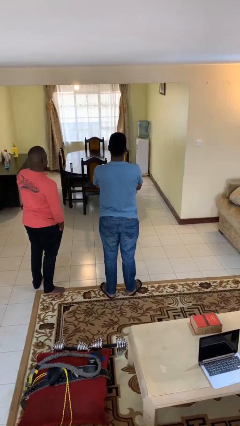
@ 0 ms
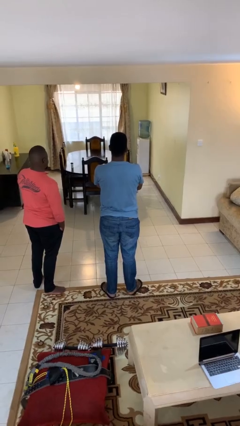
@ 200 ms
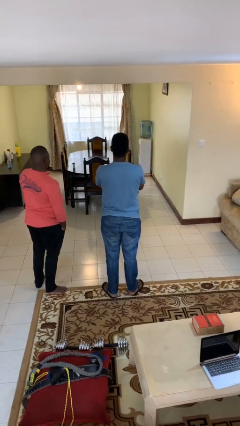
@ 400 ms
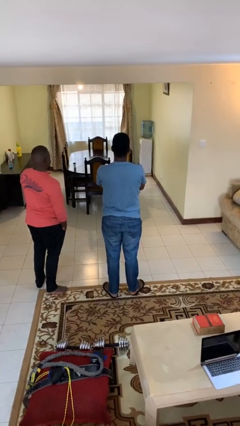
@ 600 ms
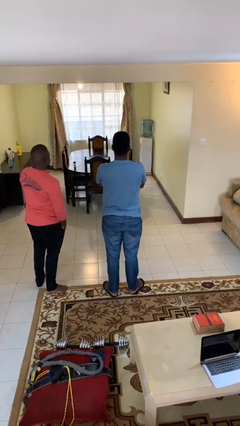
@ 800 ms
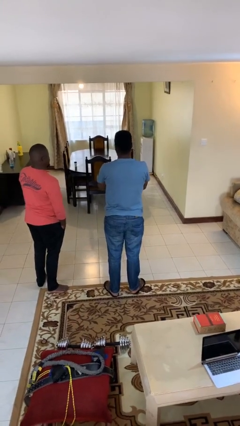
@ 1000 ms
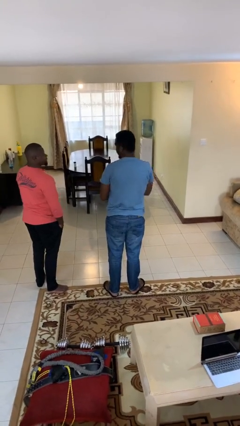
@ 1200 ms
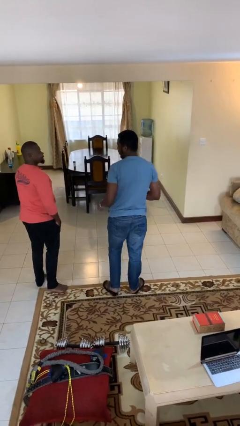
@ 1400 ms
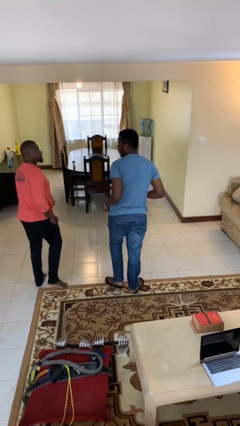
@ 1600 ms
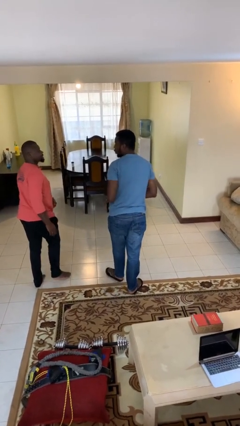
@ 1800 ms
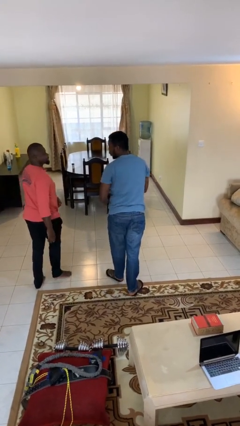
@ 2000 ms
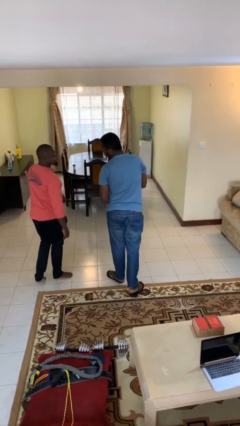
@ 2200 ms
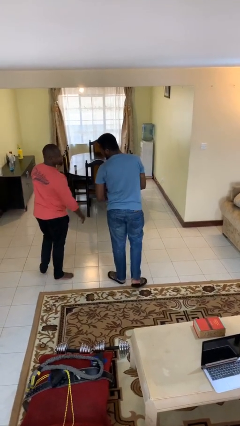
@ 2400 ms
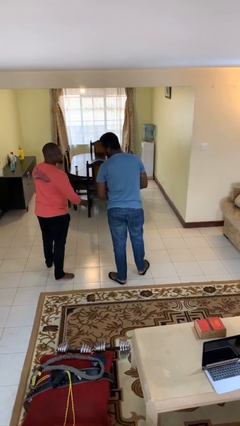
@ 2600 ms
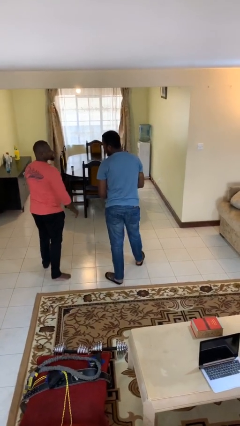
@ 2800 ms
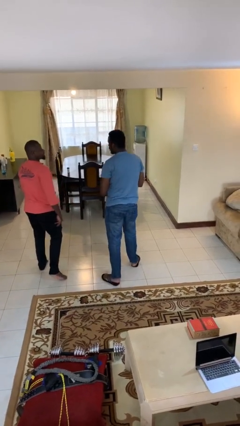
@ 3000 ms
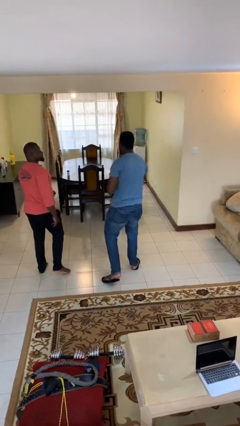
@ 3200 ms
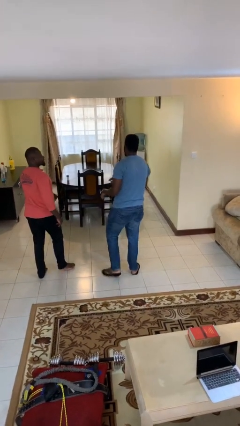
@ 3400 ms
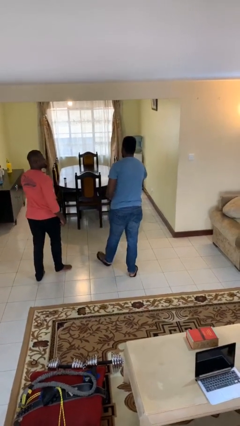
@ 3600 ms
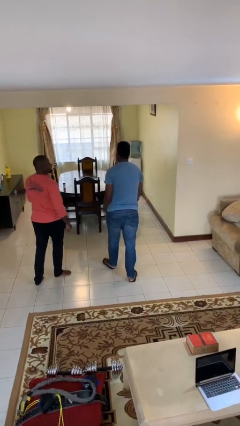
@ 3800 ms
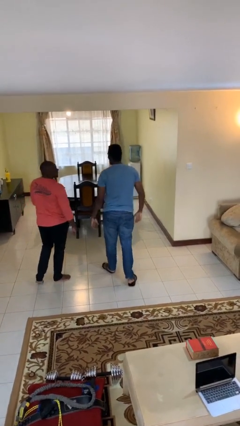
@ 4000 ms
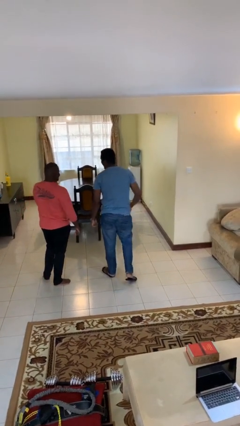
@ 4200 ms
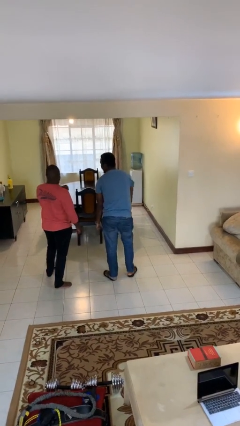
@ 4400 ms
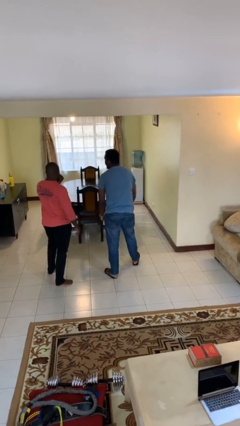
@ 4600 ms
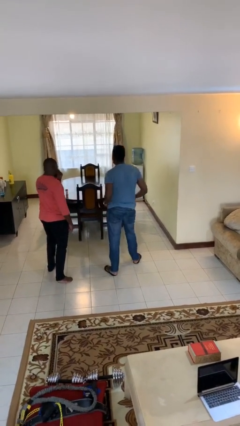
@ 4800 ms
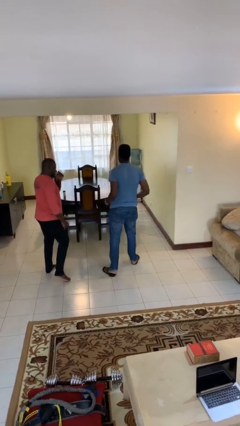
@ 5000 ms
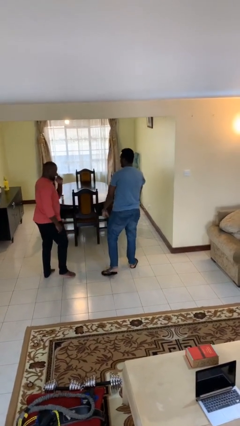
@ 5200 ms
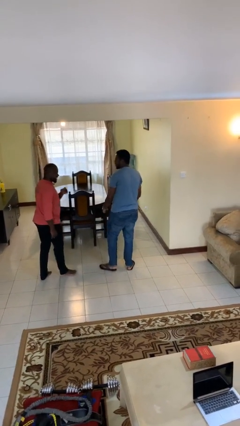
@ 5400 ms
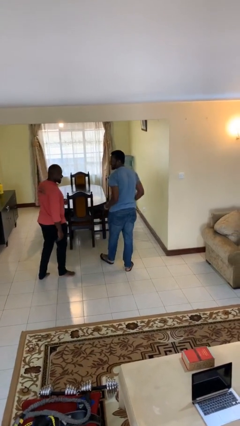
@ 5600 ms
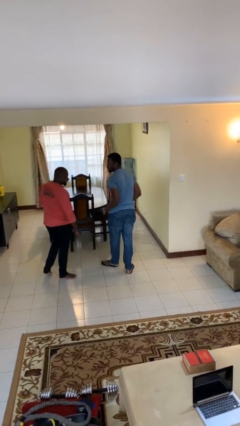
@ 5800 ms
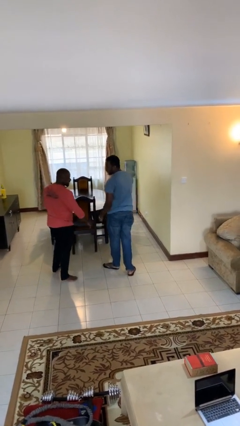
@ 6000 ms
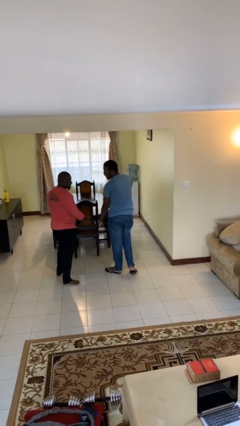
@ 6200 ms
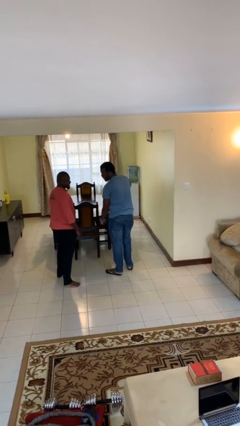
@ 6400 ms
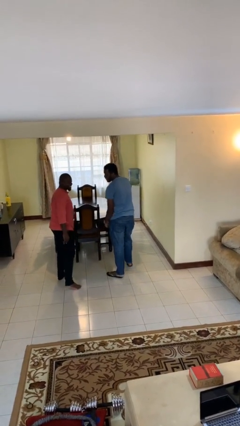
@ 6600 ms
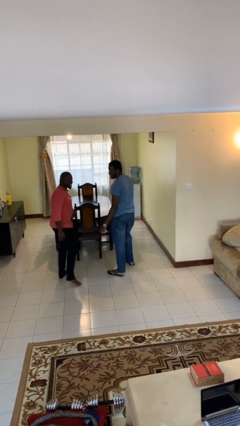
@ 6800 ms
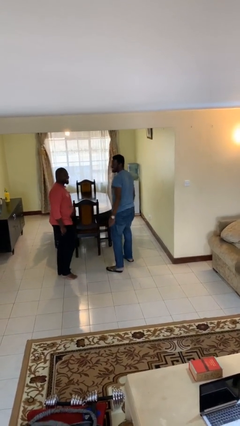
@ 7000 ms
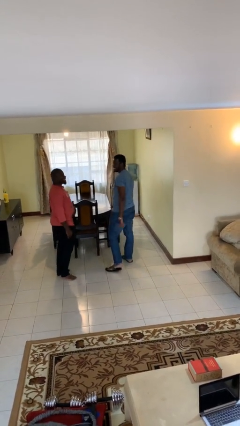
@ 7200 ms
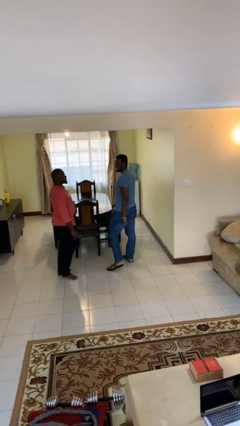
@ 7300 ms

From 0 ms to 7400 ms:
person talks to person

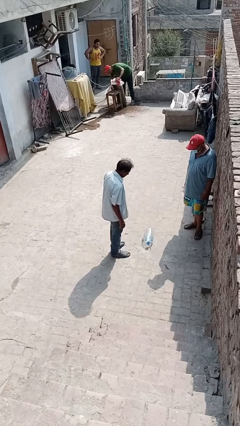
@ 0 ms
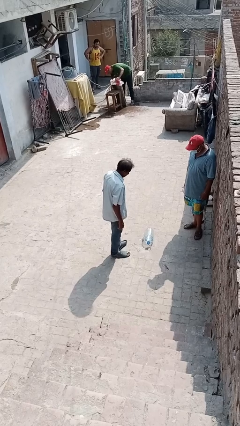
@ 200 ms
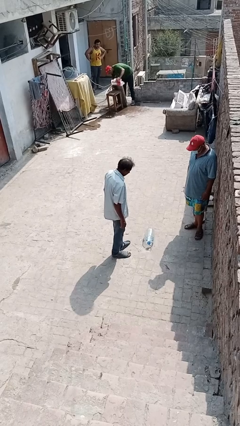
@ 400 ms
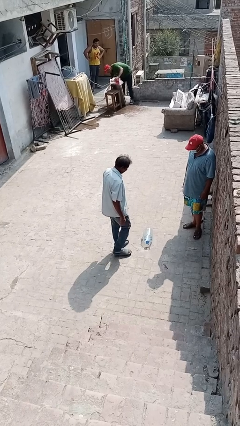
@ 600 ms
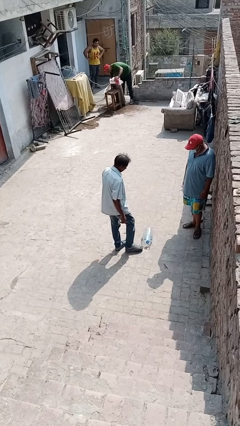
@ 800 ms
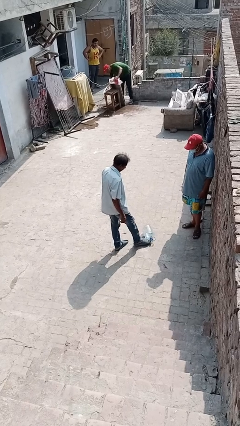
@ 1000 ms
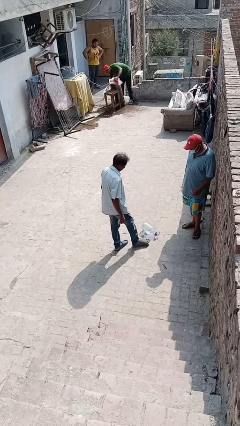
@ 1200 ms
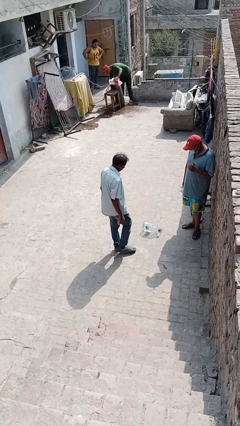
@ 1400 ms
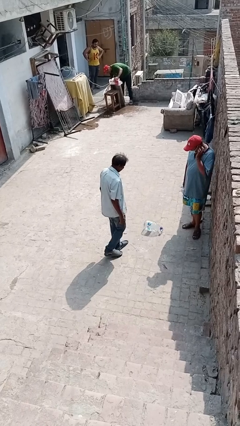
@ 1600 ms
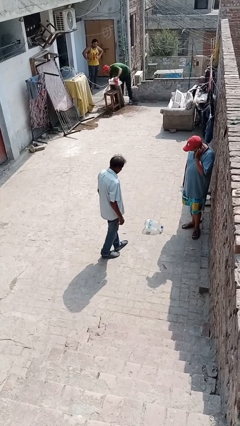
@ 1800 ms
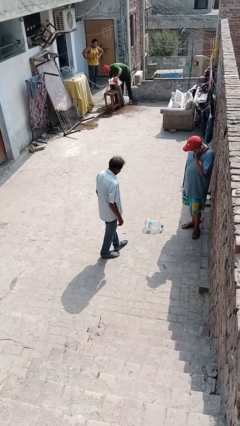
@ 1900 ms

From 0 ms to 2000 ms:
person kicks object to person

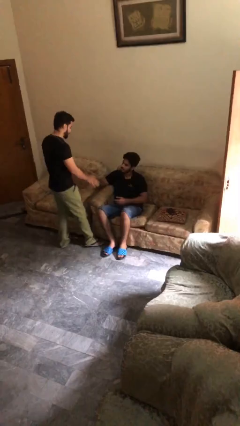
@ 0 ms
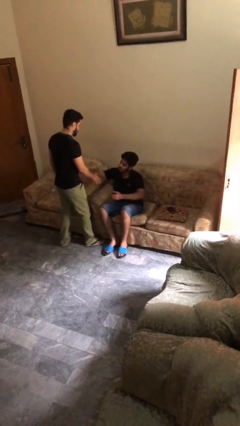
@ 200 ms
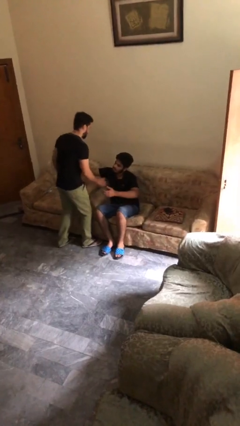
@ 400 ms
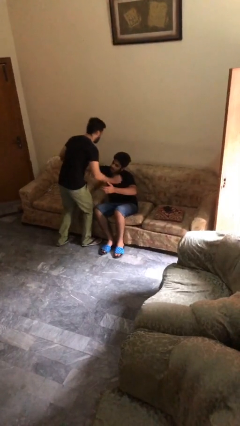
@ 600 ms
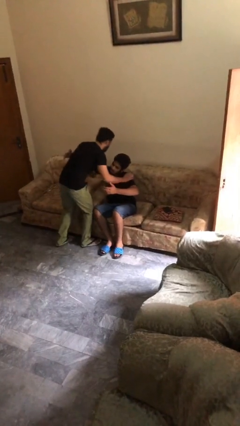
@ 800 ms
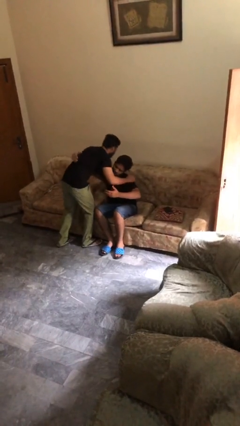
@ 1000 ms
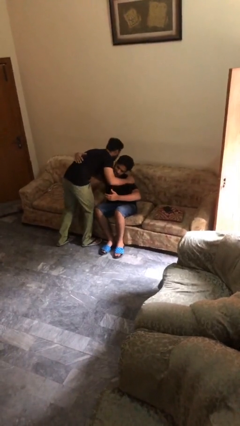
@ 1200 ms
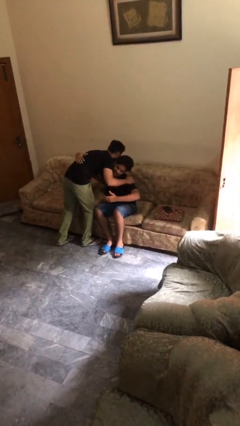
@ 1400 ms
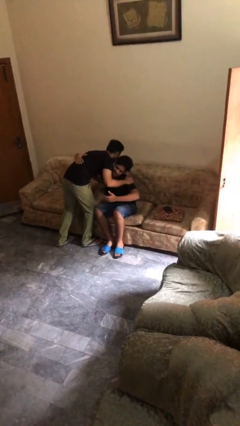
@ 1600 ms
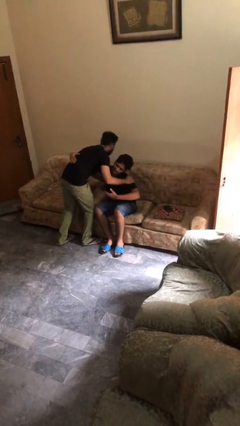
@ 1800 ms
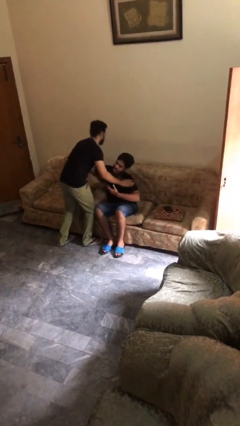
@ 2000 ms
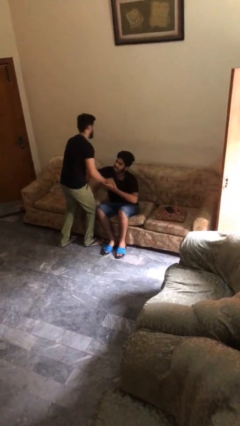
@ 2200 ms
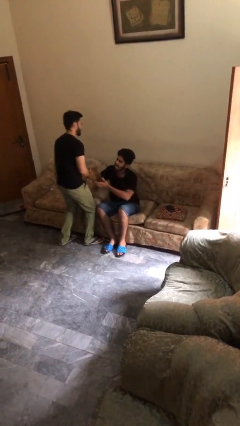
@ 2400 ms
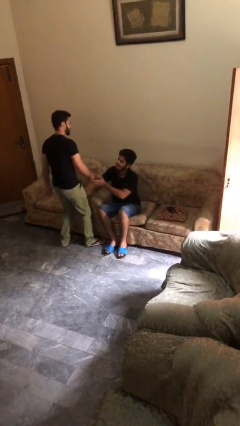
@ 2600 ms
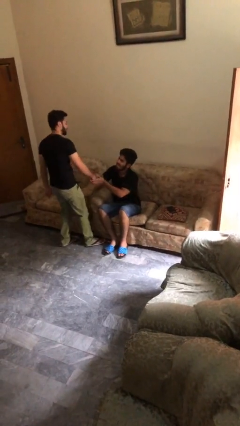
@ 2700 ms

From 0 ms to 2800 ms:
person embraces person

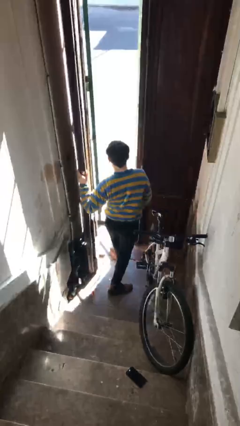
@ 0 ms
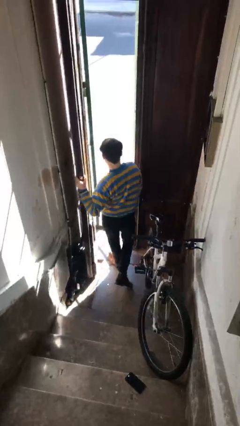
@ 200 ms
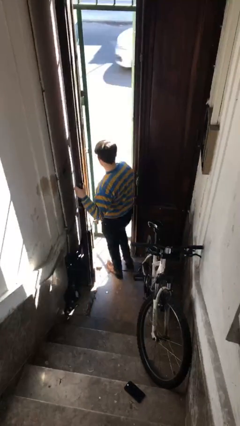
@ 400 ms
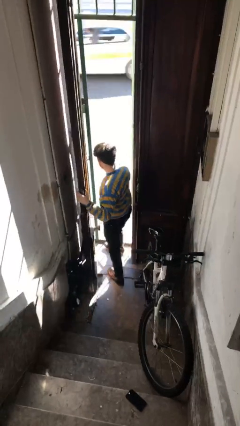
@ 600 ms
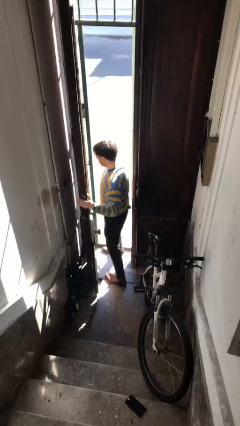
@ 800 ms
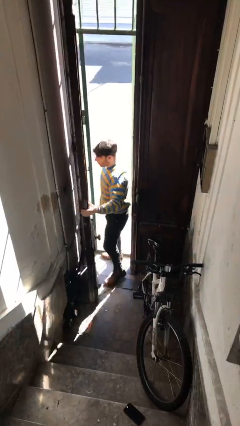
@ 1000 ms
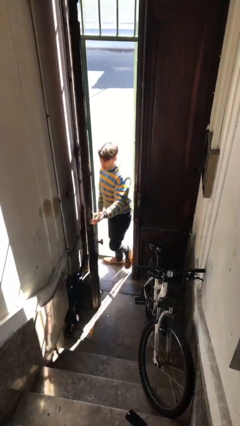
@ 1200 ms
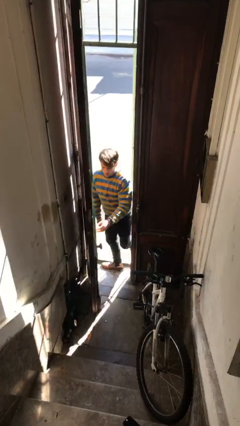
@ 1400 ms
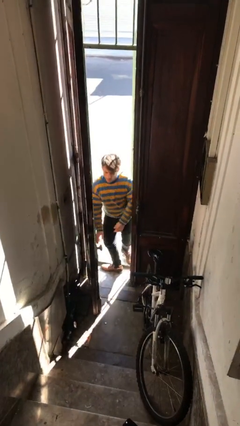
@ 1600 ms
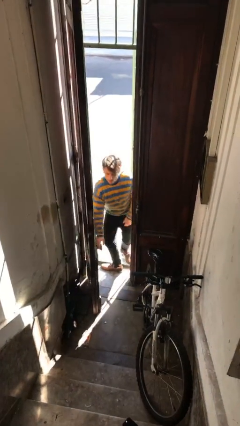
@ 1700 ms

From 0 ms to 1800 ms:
person exits scene through structure

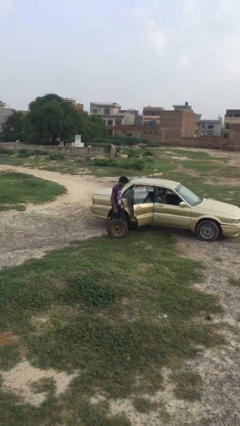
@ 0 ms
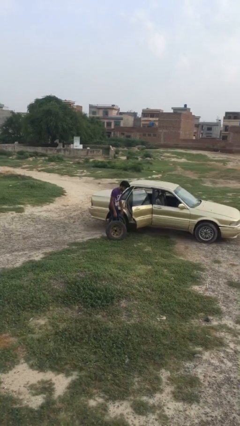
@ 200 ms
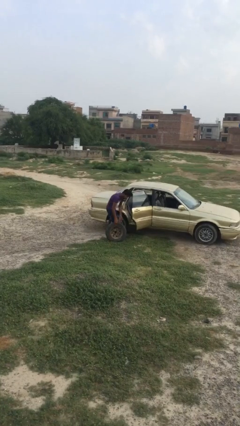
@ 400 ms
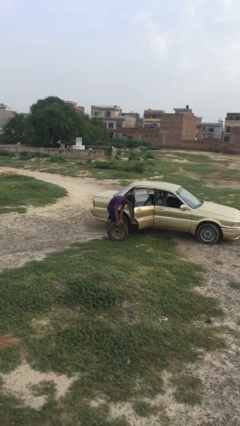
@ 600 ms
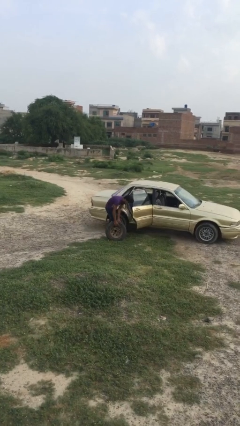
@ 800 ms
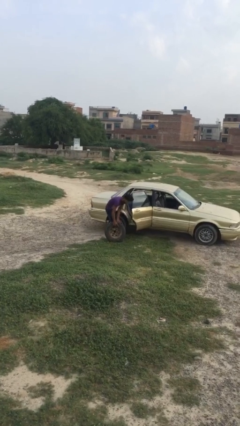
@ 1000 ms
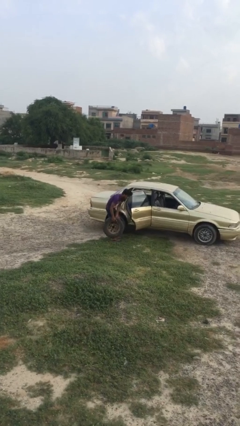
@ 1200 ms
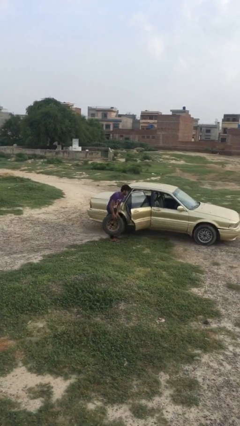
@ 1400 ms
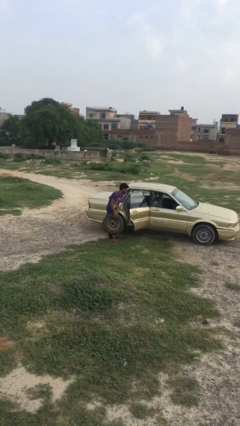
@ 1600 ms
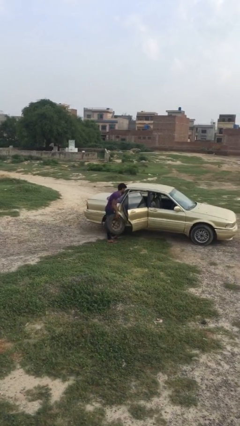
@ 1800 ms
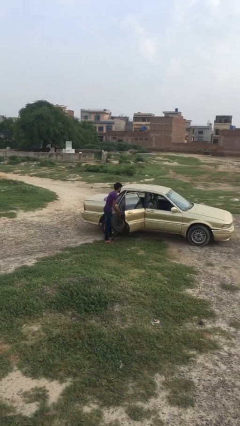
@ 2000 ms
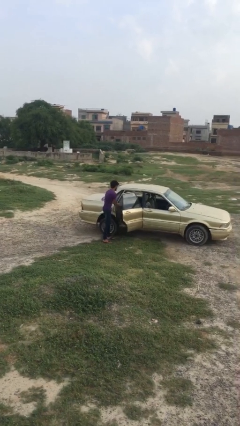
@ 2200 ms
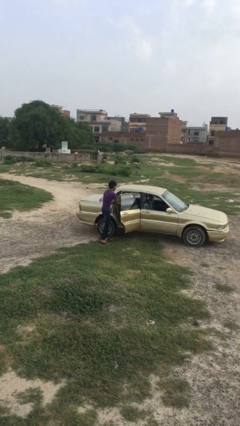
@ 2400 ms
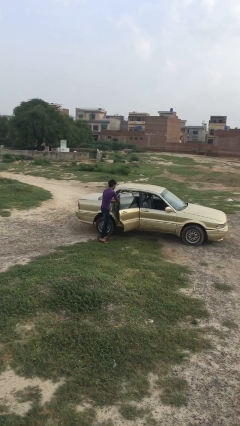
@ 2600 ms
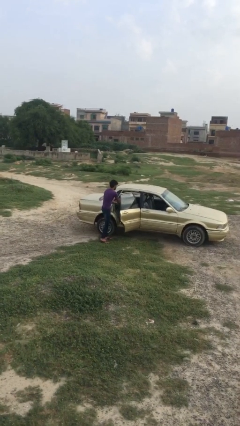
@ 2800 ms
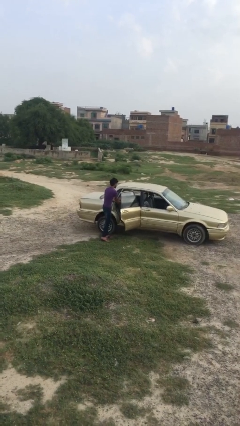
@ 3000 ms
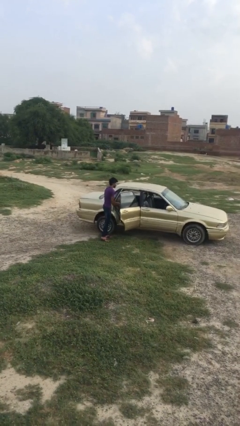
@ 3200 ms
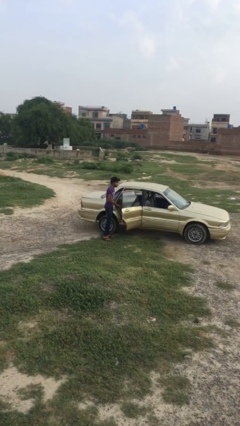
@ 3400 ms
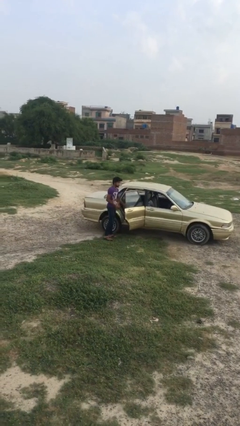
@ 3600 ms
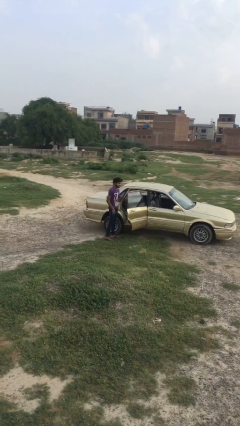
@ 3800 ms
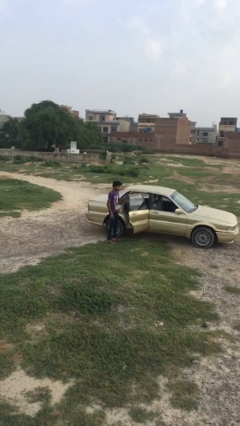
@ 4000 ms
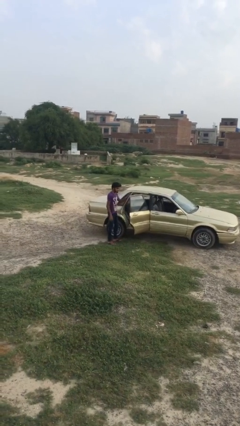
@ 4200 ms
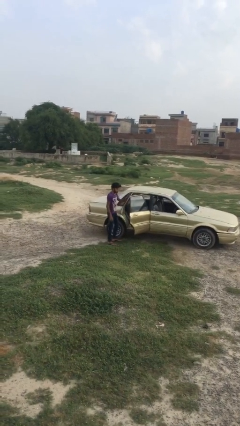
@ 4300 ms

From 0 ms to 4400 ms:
person loads car
